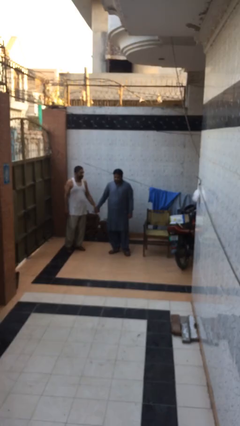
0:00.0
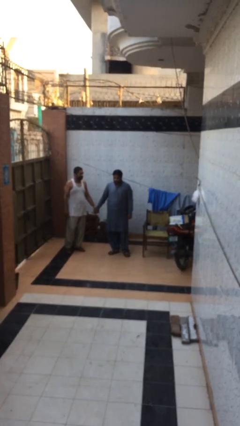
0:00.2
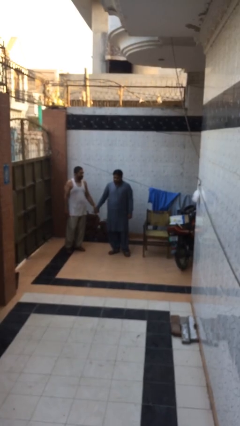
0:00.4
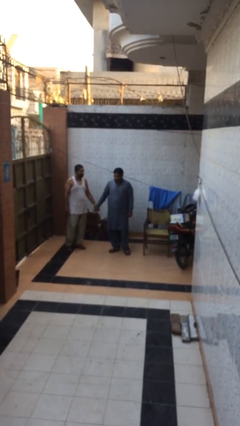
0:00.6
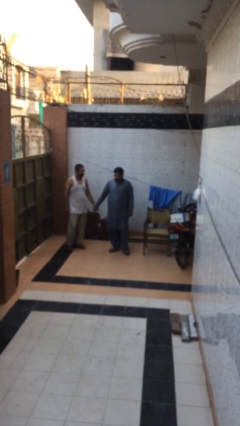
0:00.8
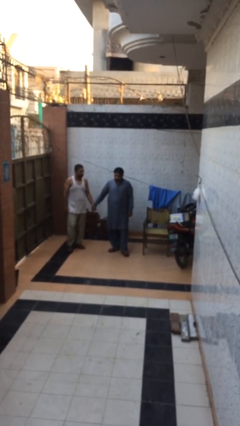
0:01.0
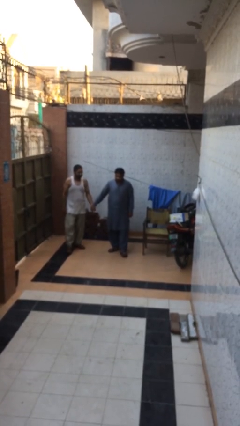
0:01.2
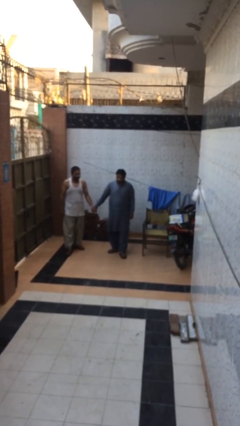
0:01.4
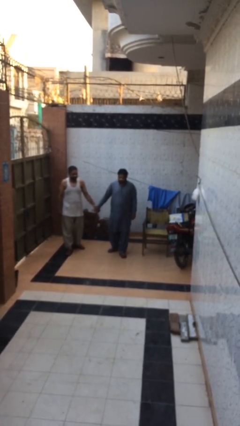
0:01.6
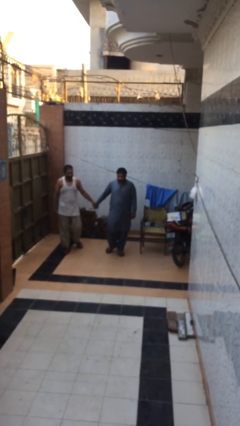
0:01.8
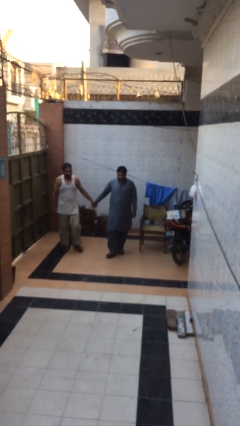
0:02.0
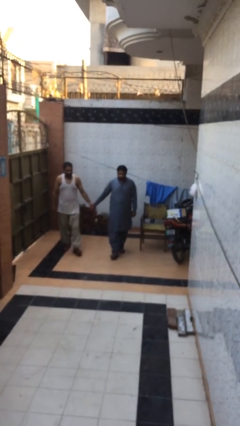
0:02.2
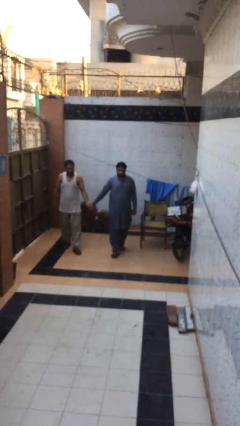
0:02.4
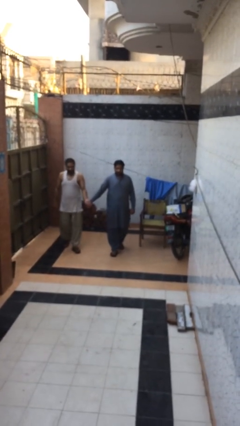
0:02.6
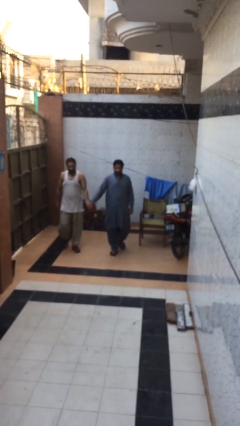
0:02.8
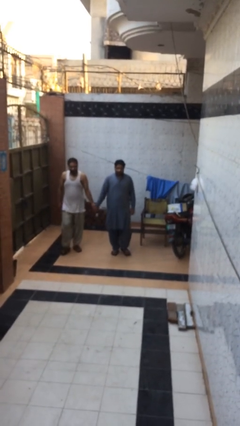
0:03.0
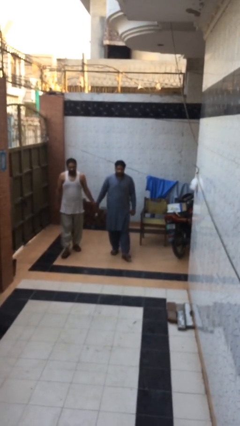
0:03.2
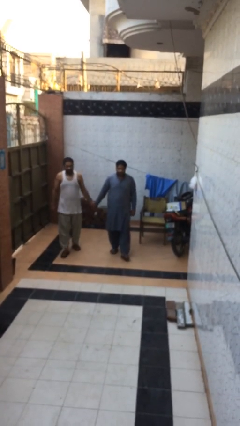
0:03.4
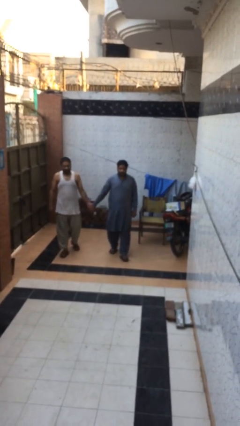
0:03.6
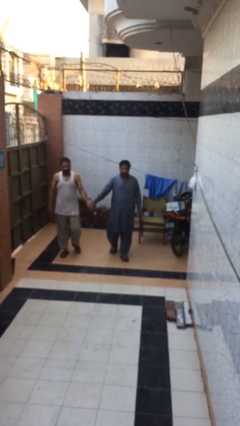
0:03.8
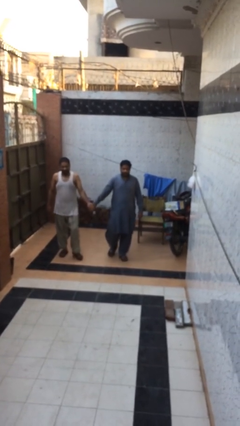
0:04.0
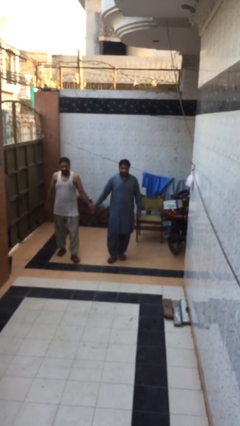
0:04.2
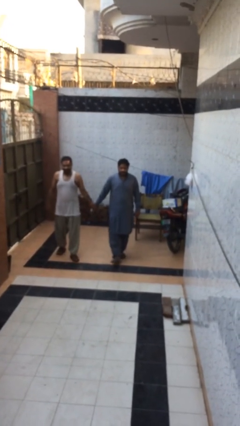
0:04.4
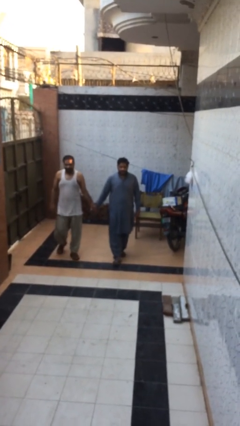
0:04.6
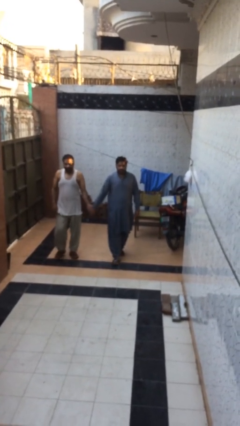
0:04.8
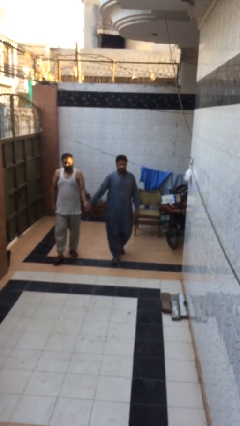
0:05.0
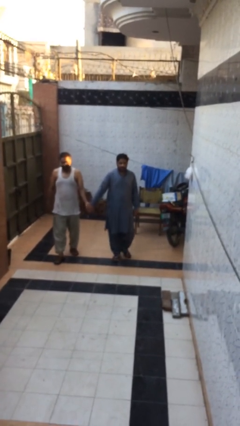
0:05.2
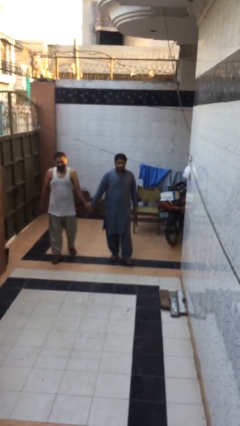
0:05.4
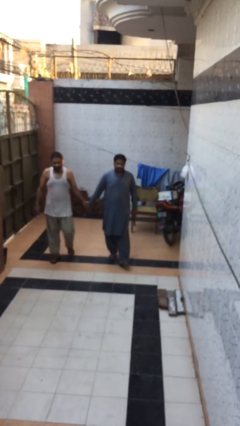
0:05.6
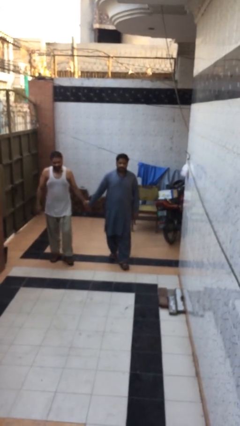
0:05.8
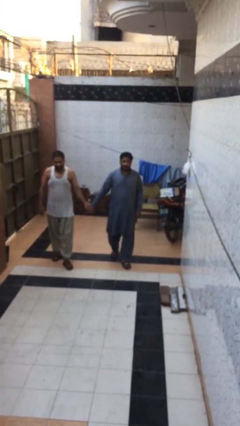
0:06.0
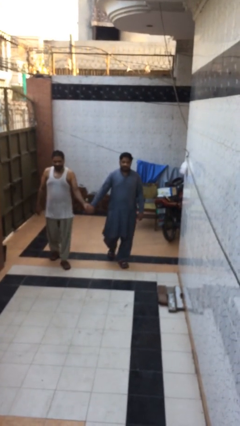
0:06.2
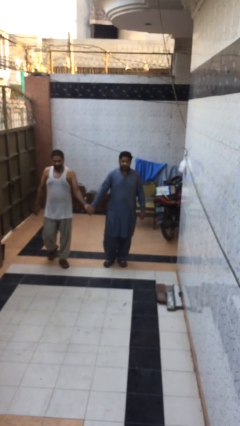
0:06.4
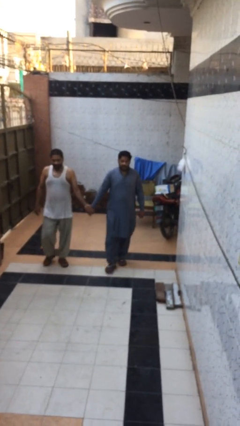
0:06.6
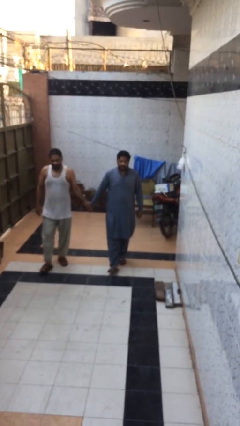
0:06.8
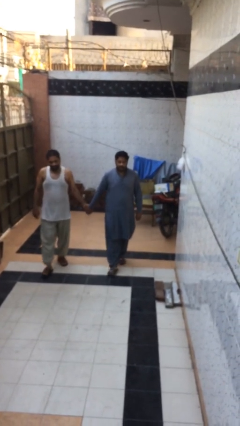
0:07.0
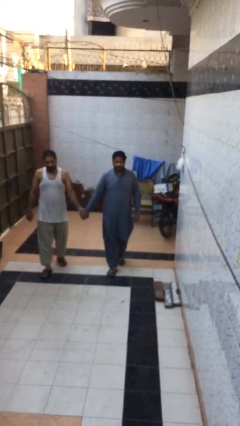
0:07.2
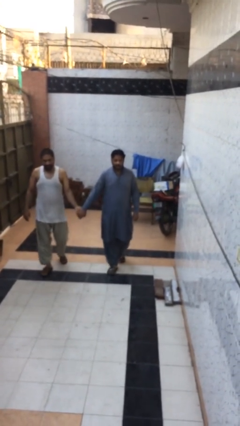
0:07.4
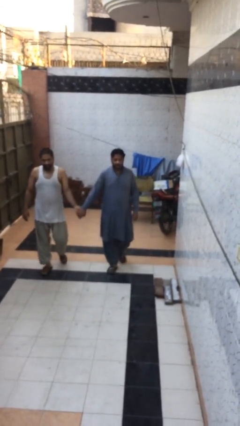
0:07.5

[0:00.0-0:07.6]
person holds hand

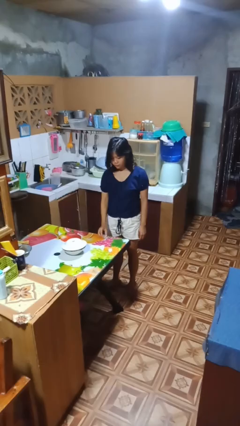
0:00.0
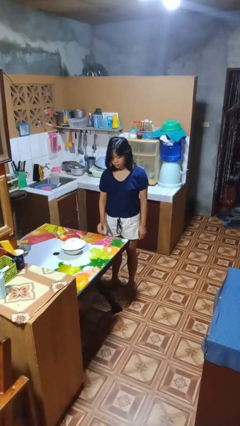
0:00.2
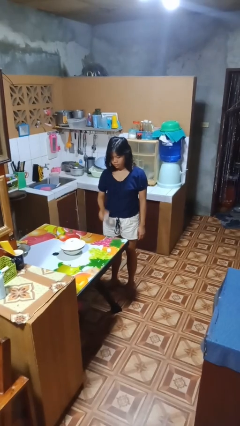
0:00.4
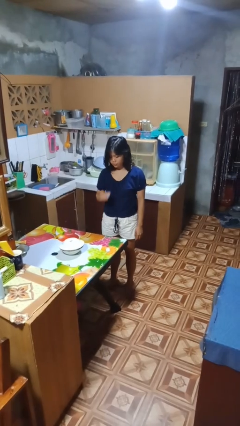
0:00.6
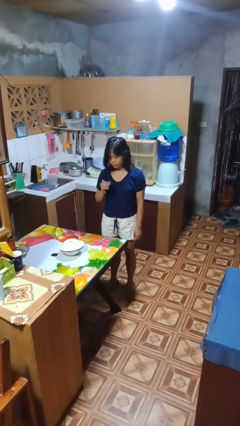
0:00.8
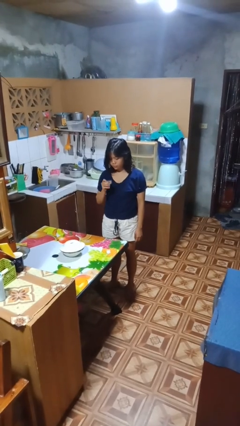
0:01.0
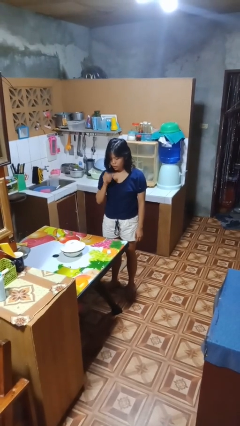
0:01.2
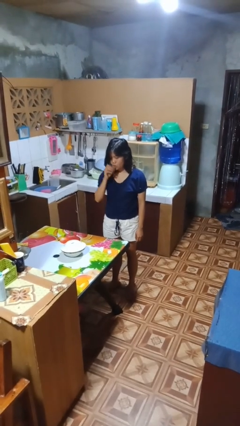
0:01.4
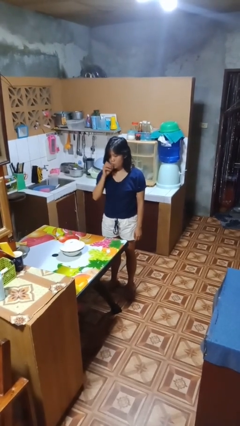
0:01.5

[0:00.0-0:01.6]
person picks up object from table

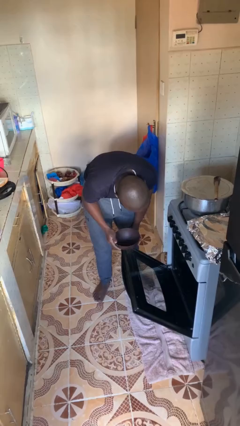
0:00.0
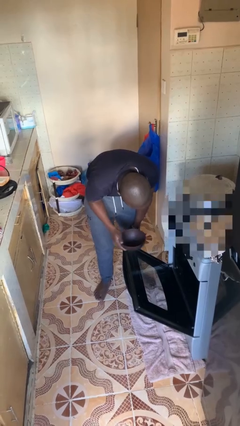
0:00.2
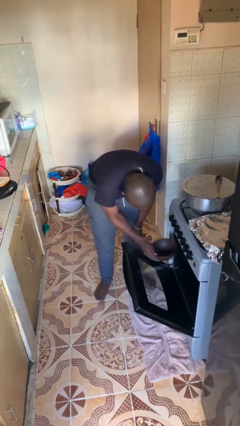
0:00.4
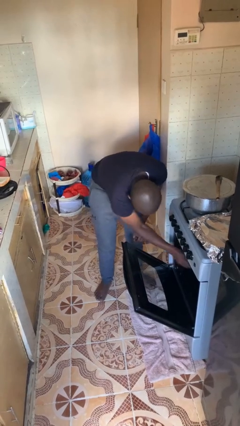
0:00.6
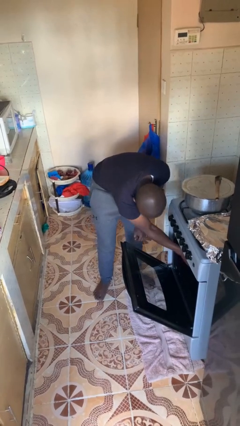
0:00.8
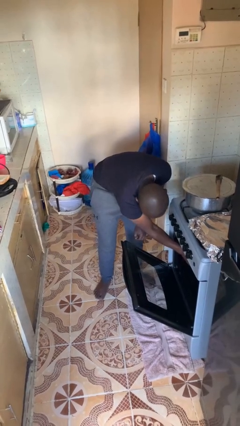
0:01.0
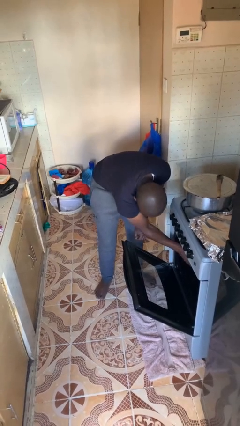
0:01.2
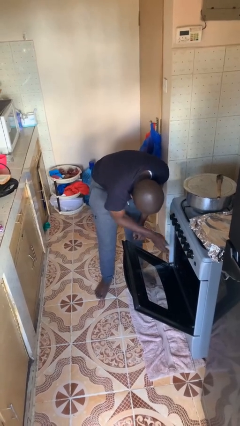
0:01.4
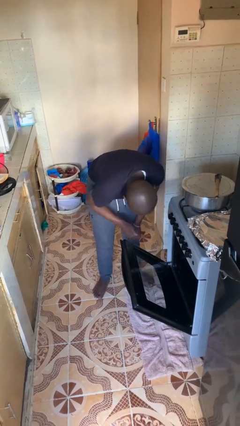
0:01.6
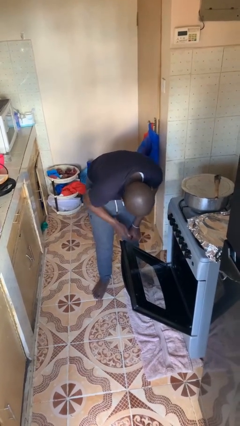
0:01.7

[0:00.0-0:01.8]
person puts object into oven

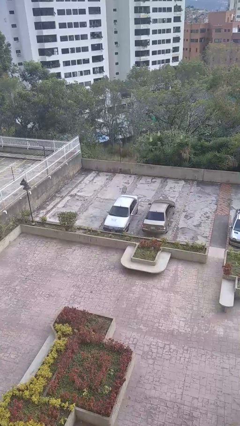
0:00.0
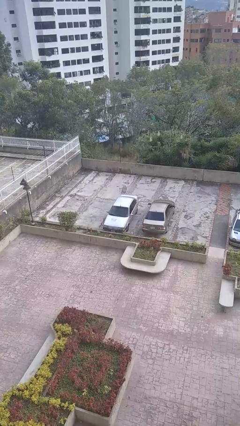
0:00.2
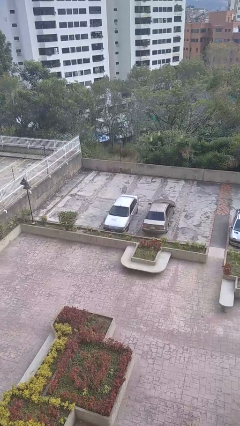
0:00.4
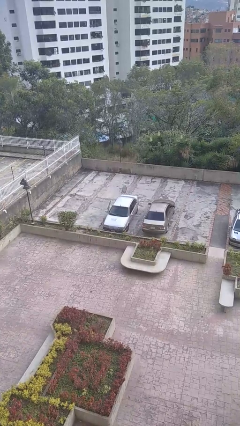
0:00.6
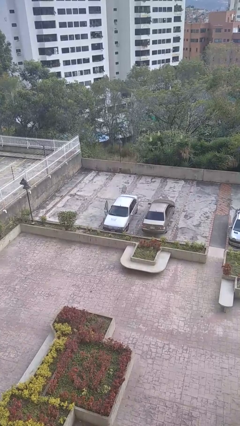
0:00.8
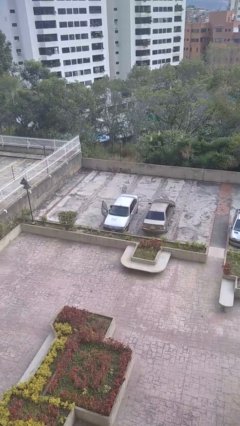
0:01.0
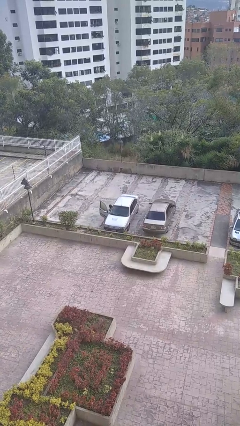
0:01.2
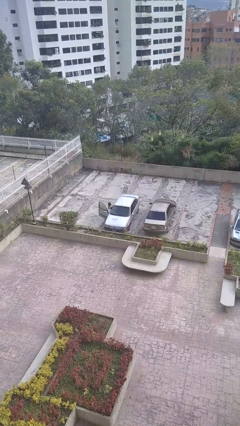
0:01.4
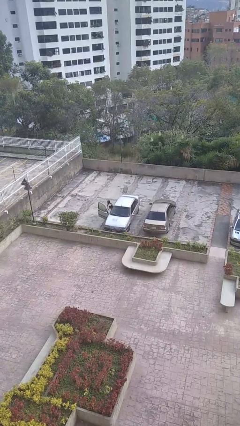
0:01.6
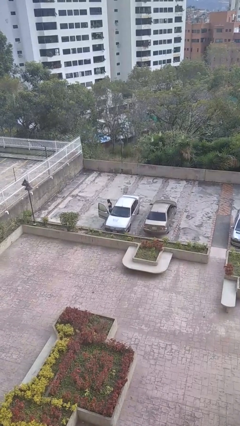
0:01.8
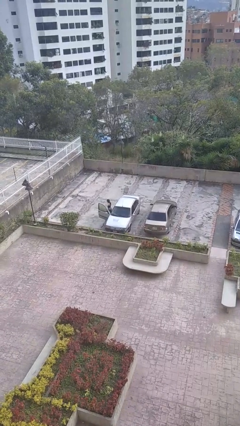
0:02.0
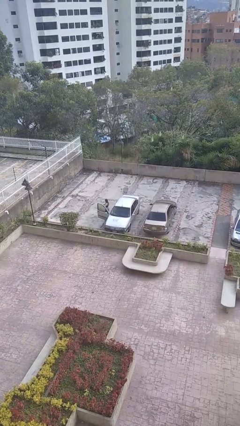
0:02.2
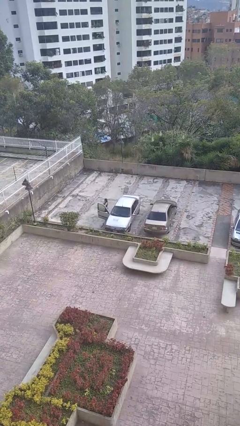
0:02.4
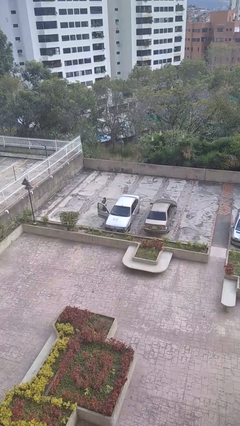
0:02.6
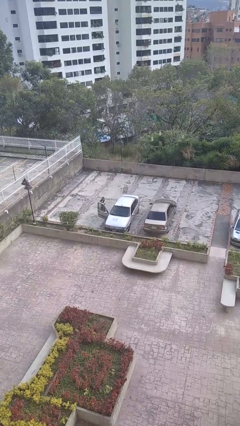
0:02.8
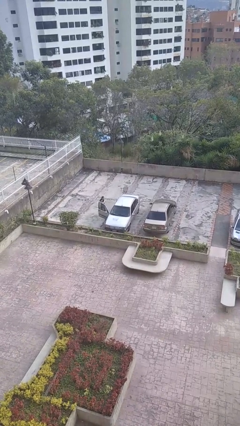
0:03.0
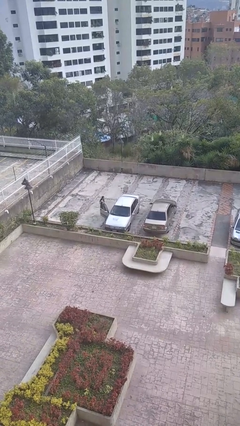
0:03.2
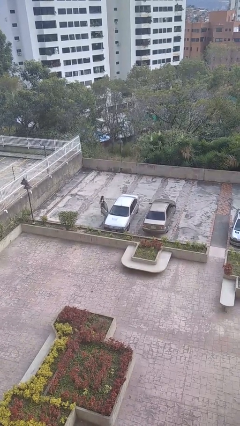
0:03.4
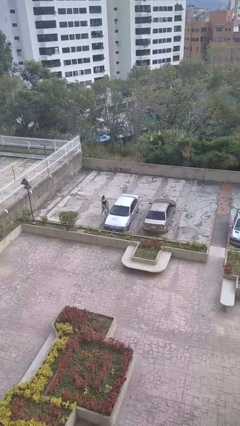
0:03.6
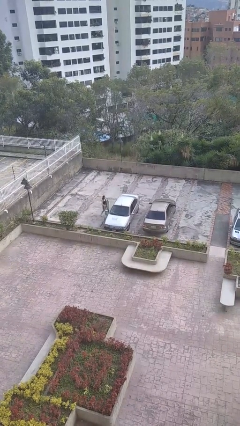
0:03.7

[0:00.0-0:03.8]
car drops off person

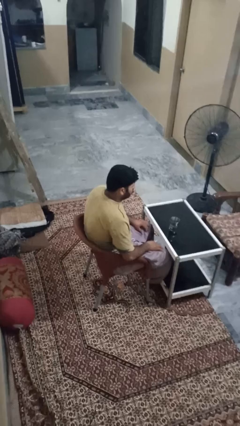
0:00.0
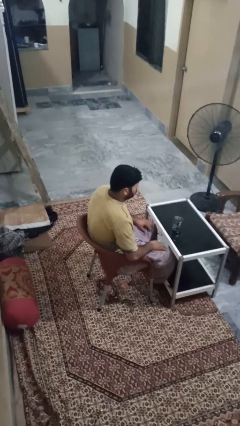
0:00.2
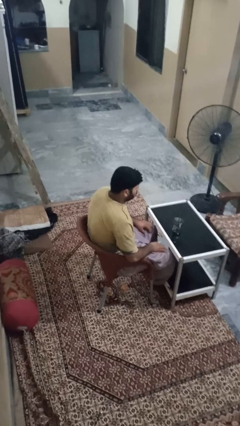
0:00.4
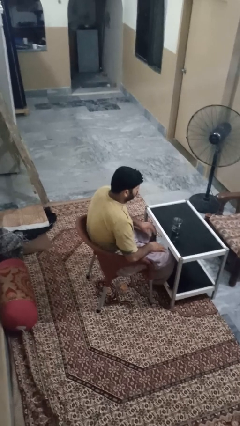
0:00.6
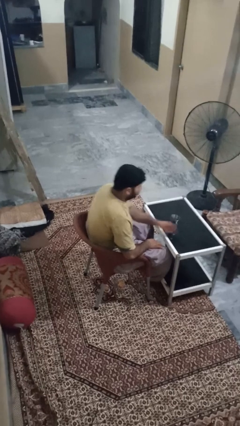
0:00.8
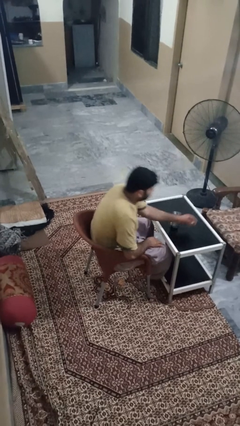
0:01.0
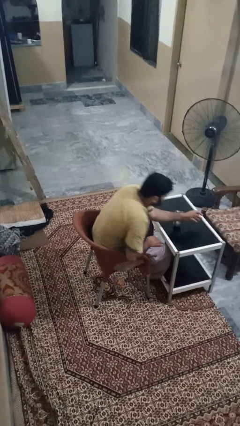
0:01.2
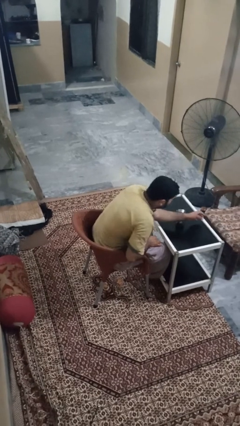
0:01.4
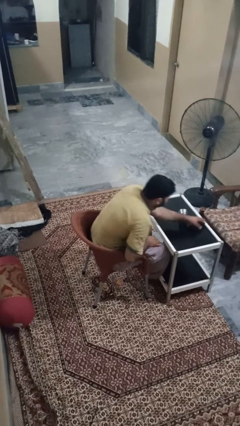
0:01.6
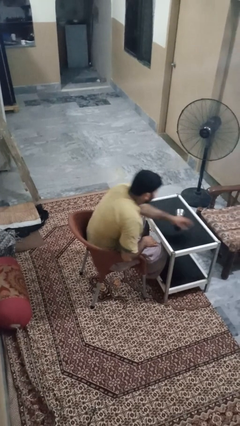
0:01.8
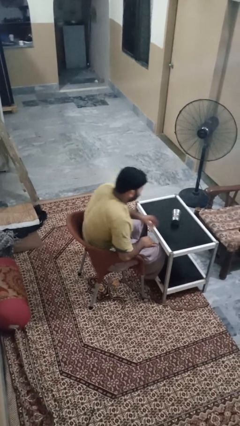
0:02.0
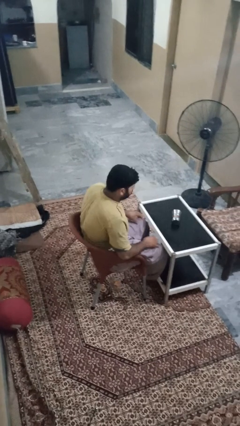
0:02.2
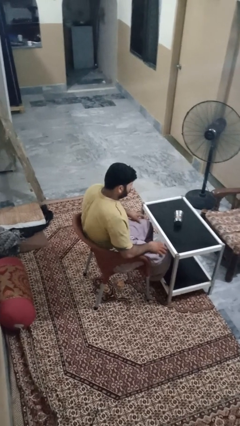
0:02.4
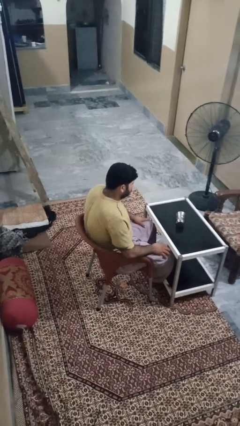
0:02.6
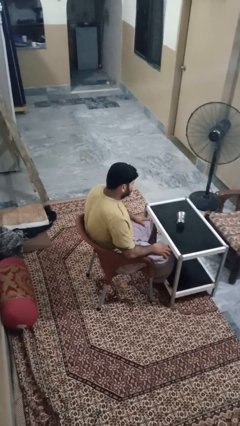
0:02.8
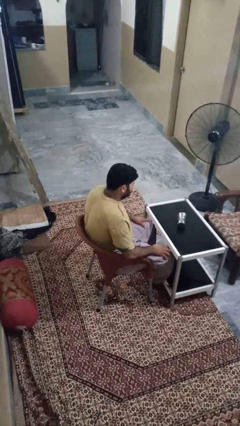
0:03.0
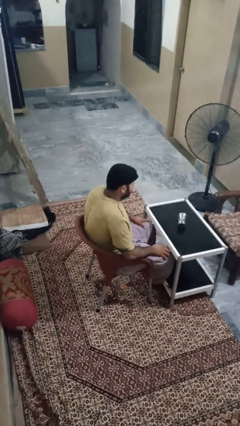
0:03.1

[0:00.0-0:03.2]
person knocks over glass
